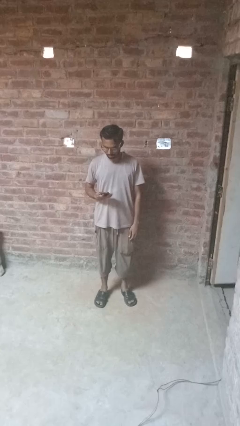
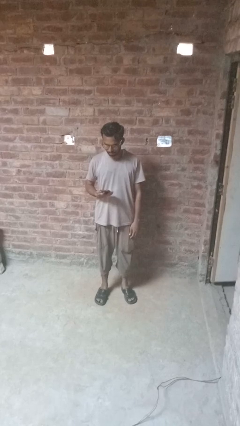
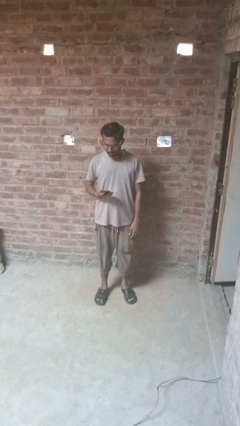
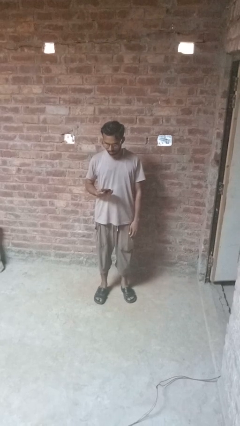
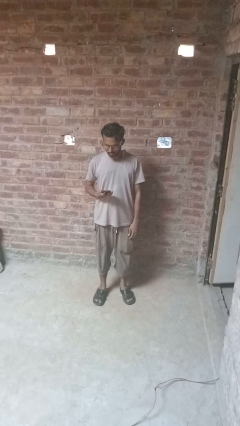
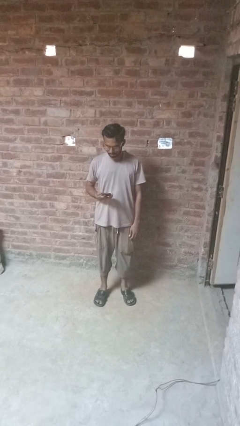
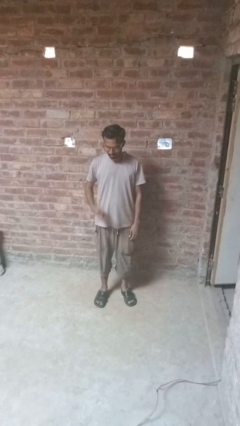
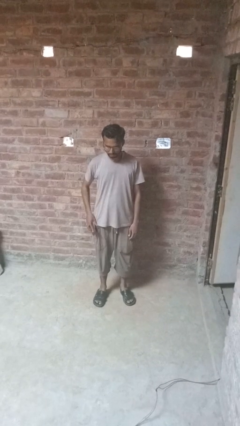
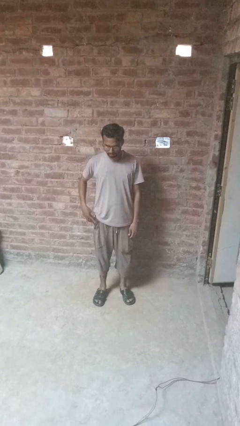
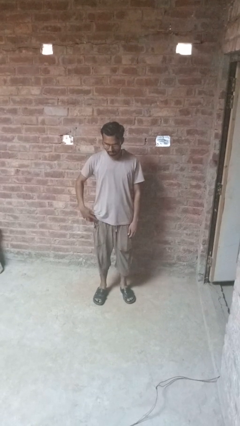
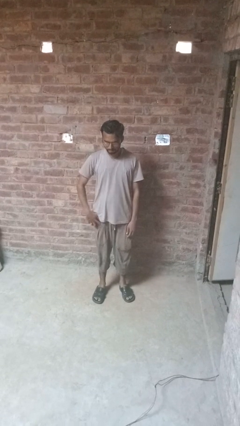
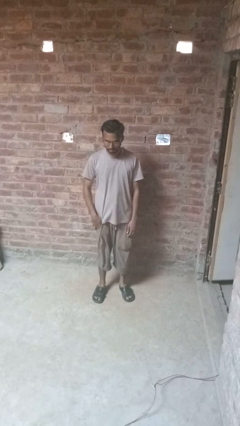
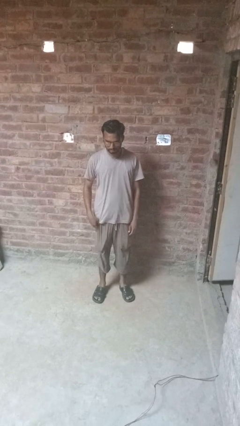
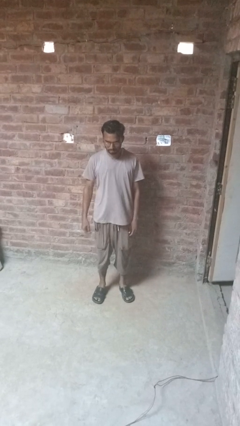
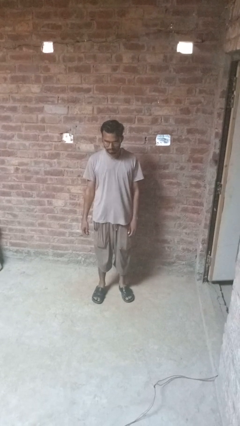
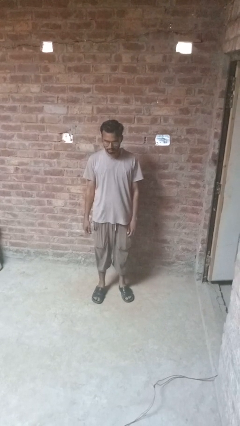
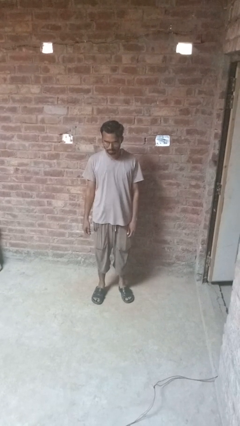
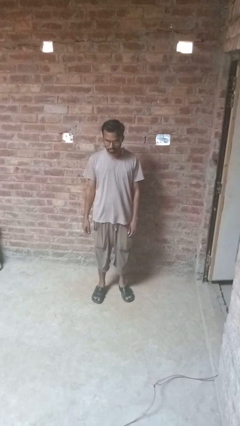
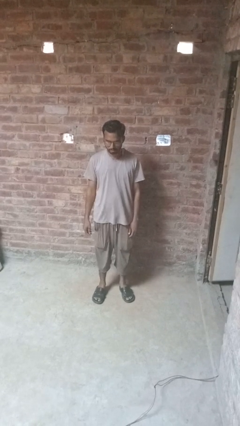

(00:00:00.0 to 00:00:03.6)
person puts phone into pocket

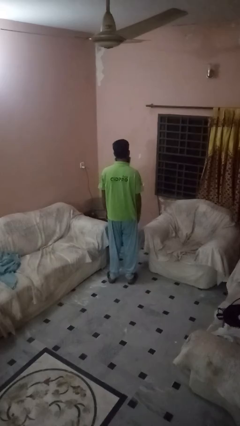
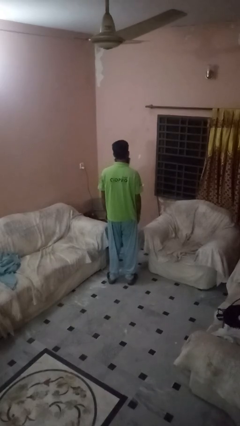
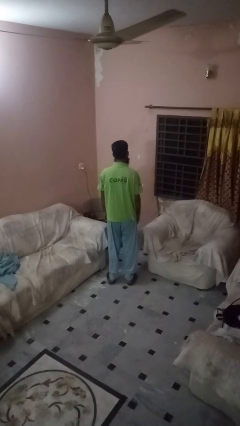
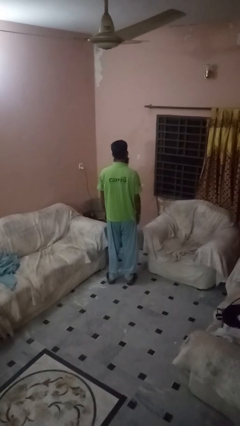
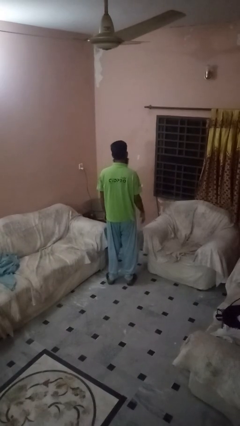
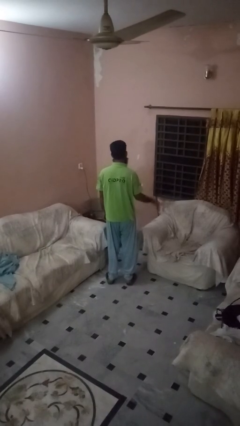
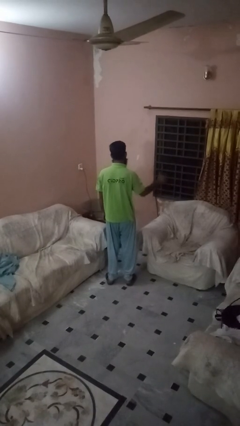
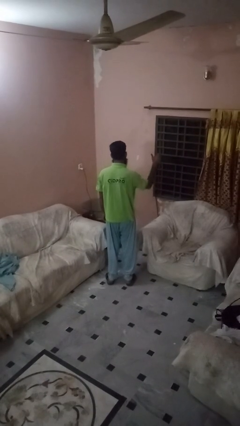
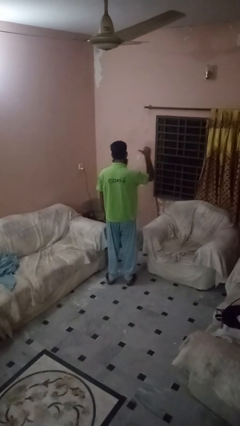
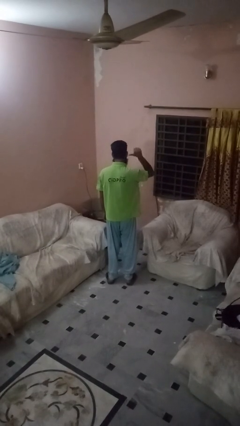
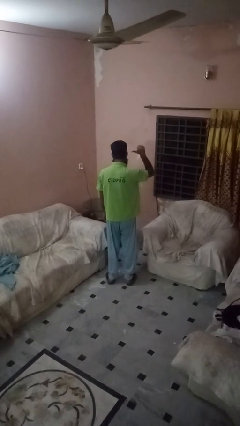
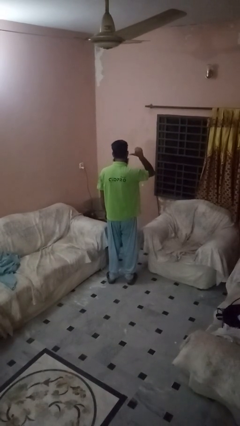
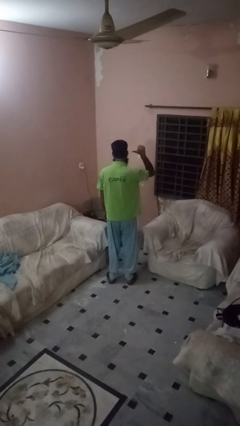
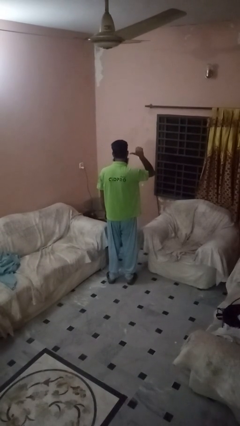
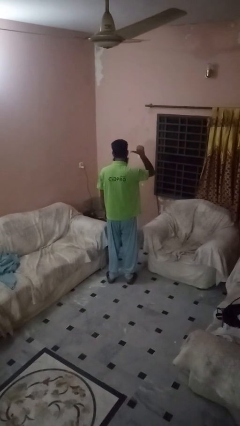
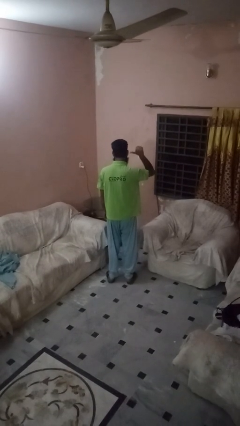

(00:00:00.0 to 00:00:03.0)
person gestures behind me

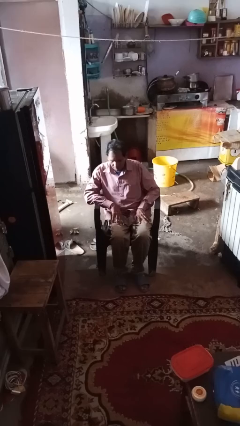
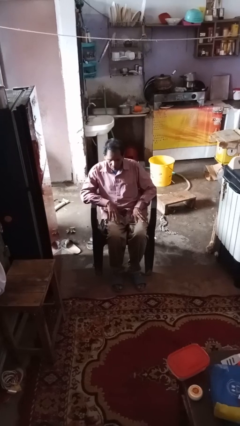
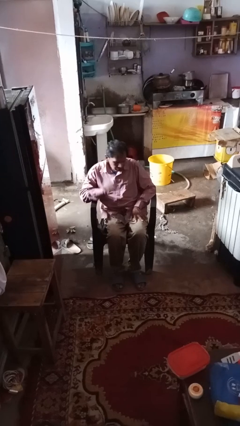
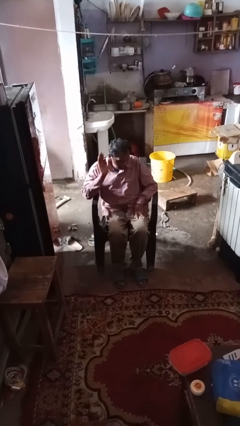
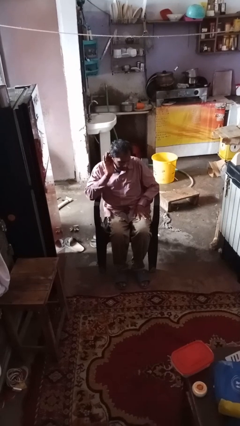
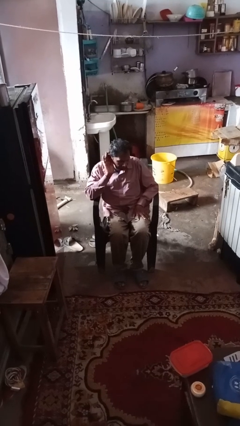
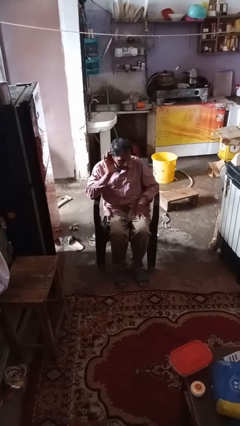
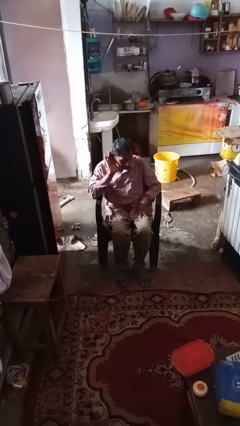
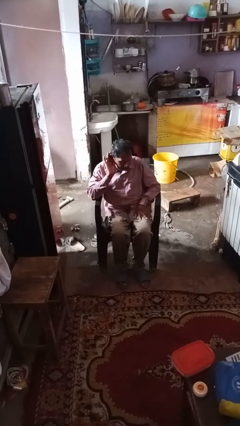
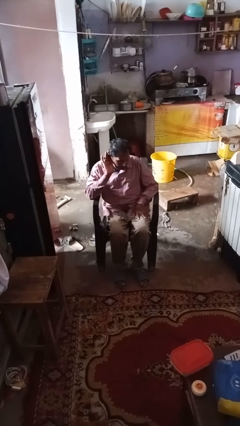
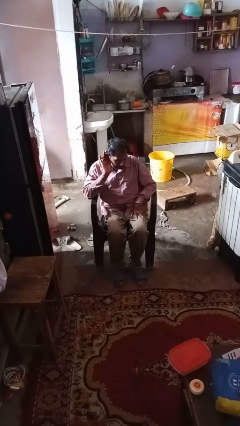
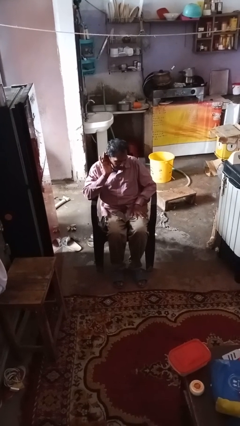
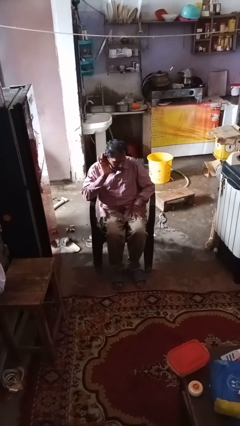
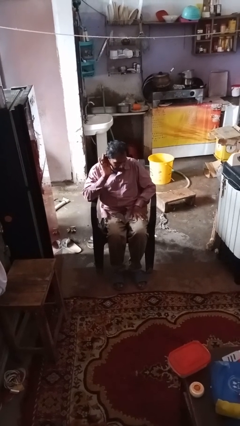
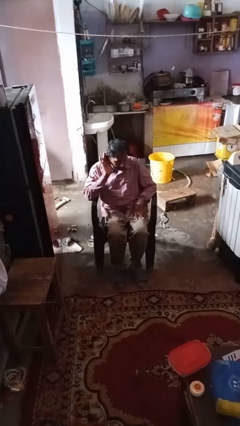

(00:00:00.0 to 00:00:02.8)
person gestures listen closely

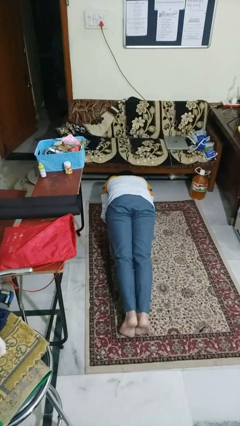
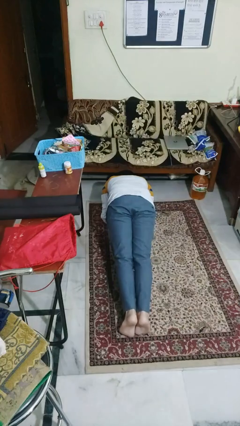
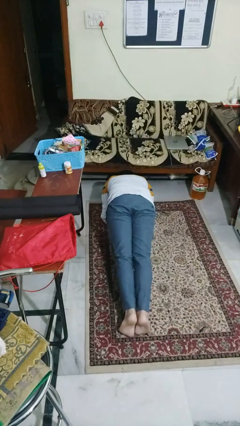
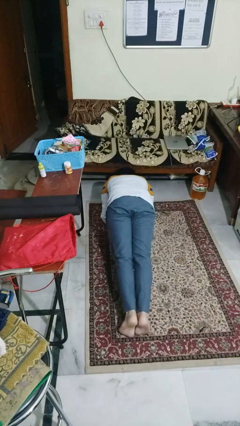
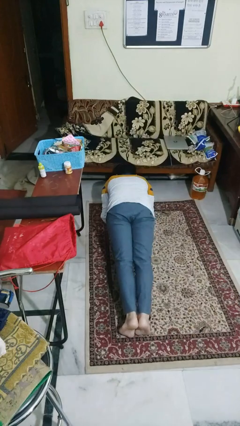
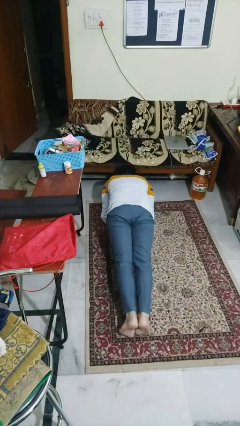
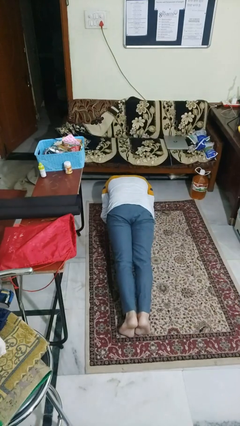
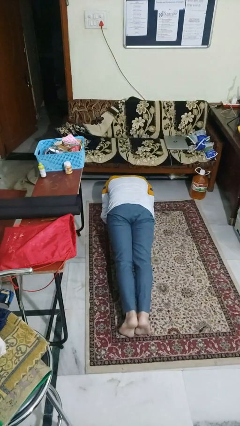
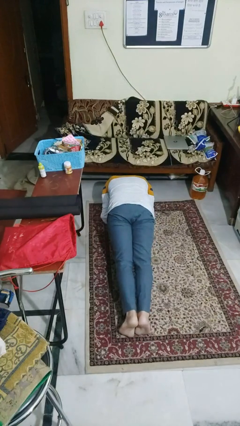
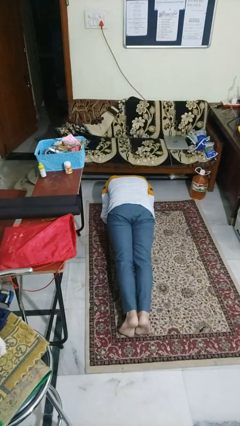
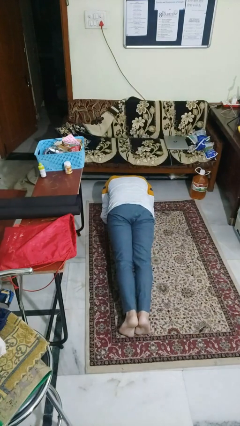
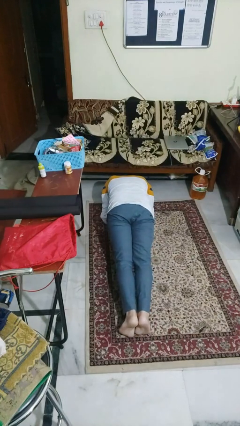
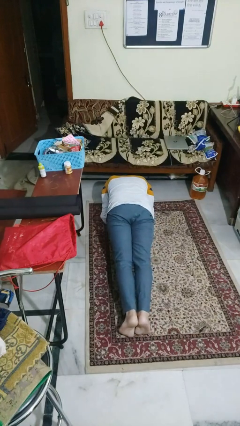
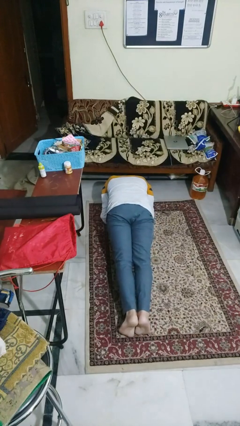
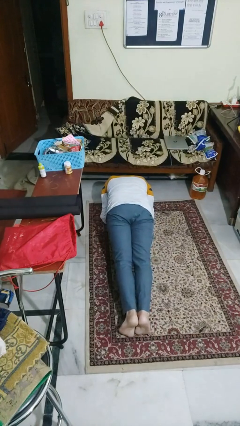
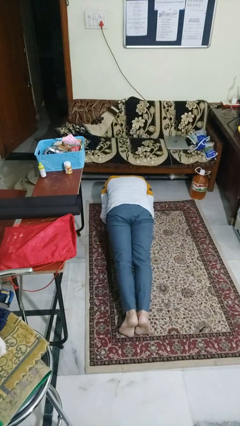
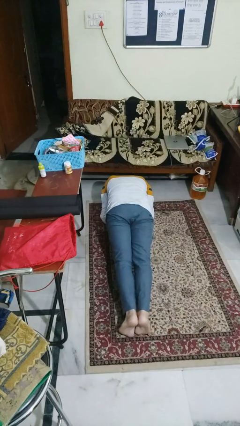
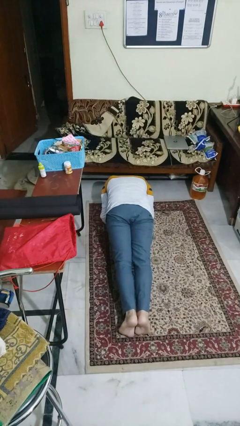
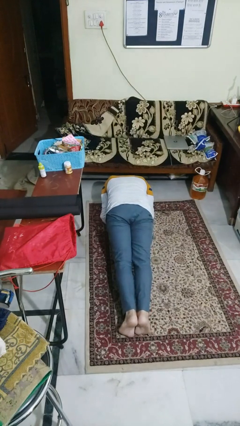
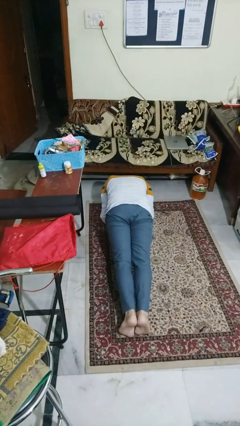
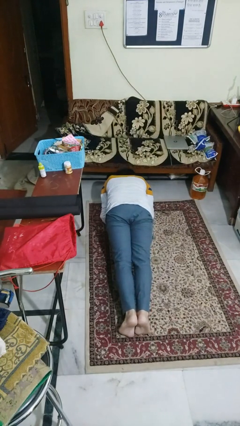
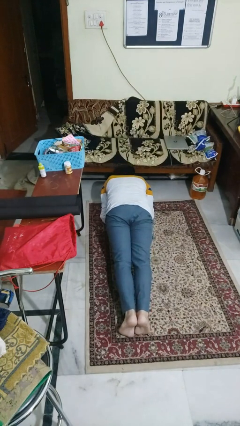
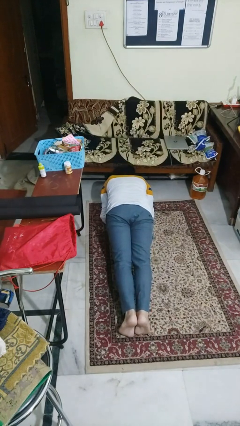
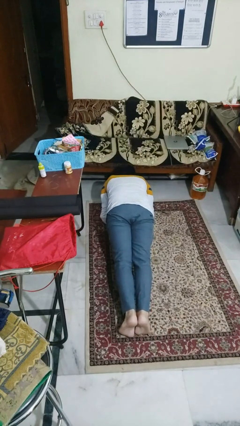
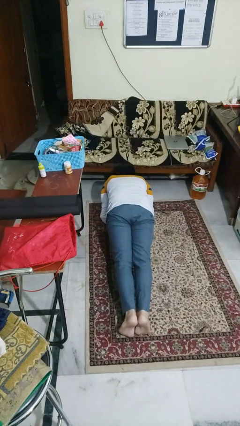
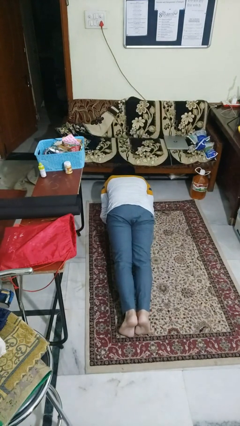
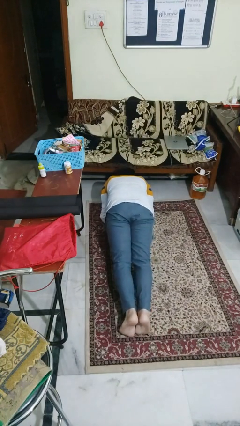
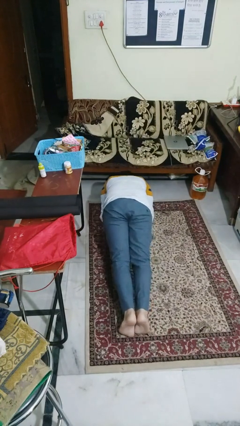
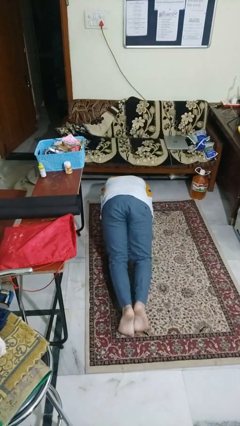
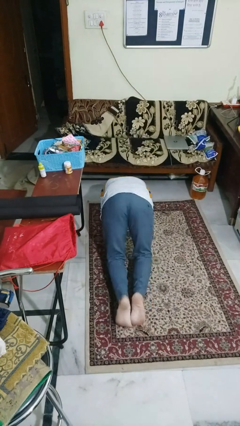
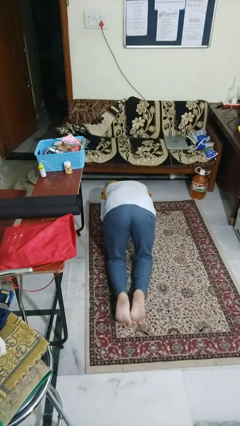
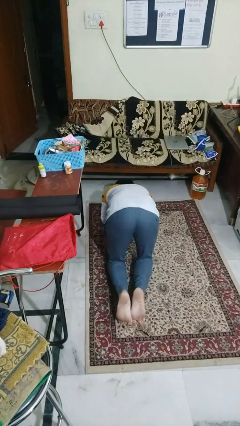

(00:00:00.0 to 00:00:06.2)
person exercises with plank

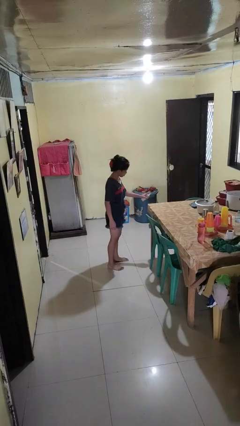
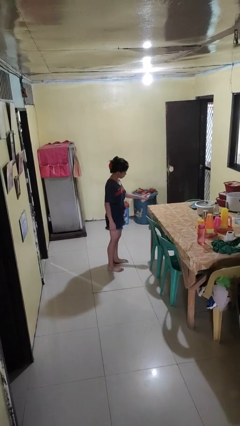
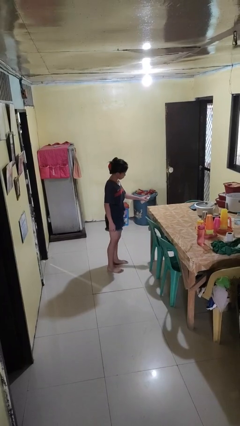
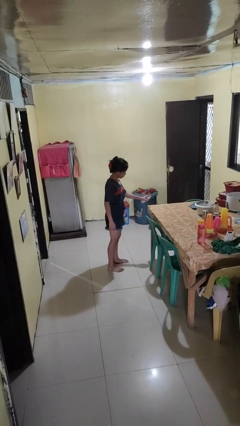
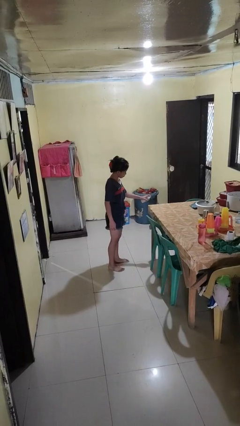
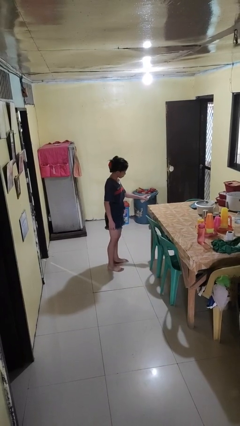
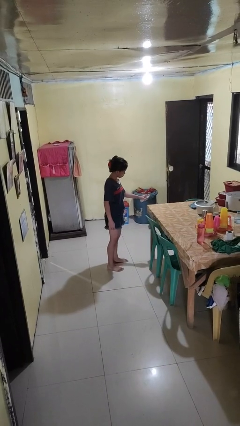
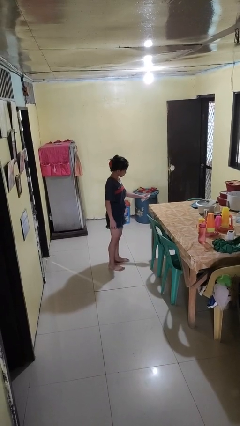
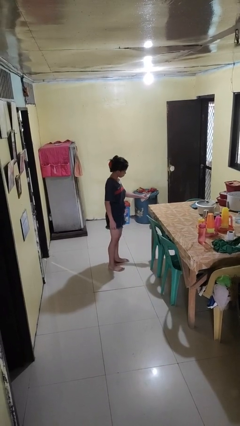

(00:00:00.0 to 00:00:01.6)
person sprays from bottle

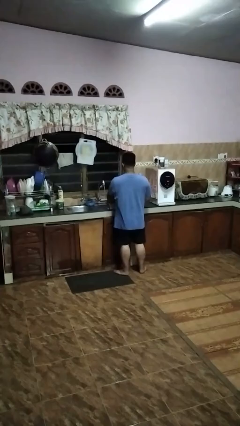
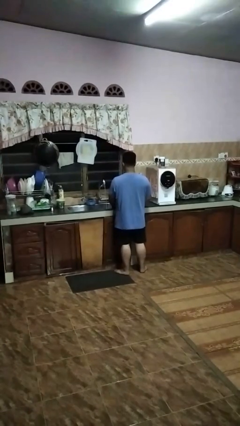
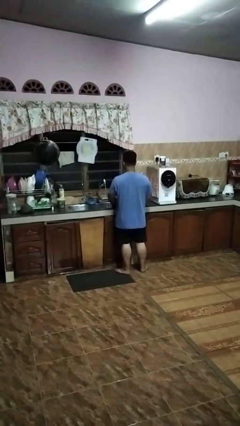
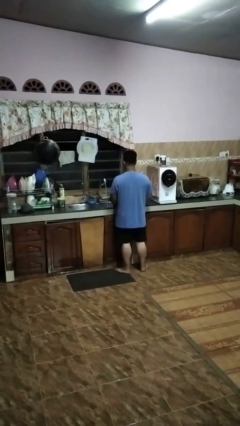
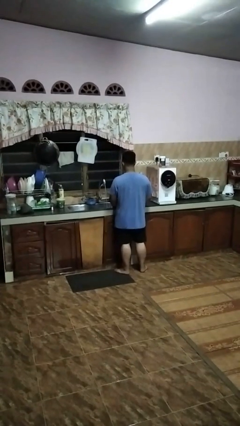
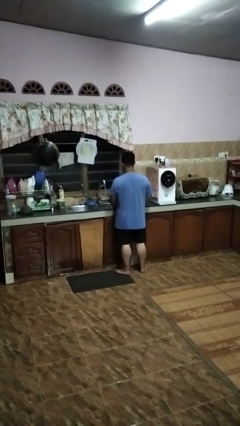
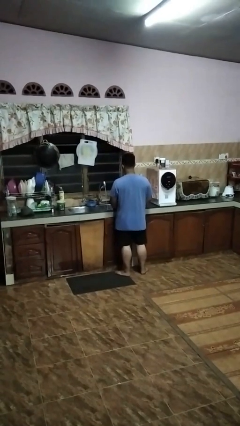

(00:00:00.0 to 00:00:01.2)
person turns on faucet
